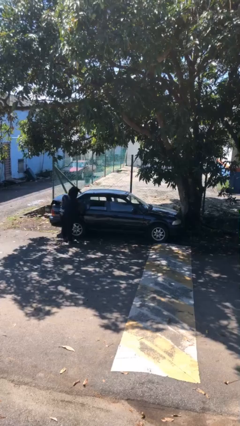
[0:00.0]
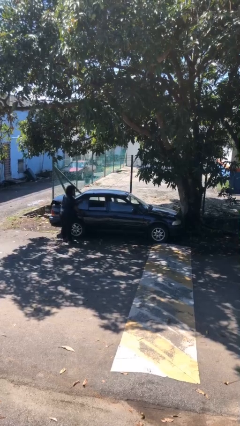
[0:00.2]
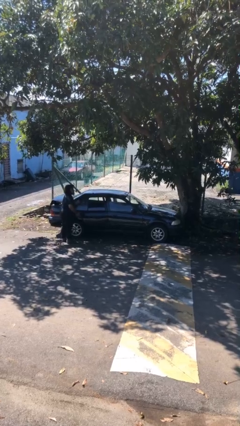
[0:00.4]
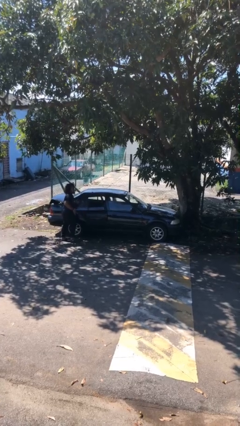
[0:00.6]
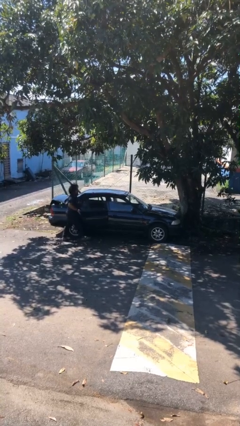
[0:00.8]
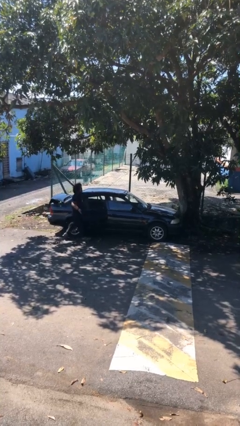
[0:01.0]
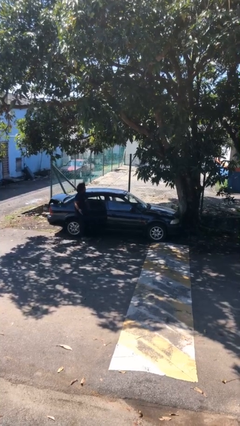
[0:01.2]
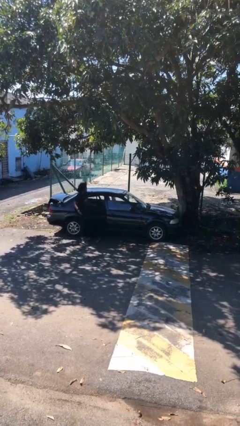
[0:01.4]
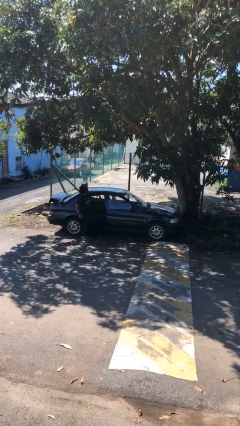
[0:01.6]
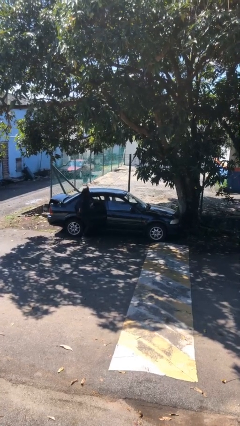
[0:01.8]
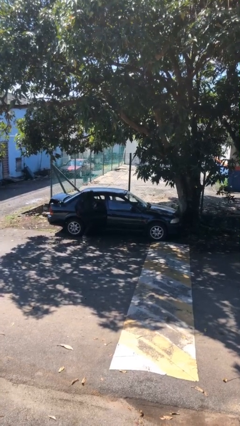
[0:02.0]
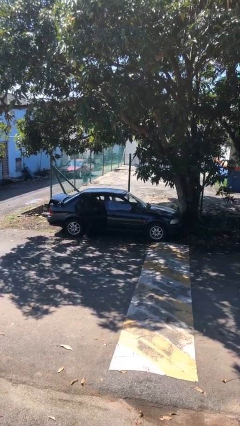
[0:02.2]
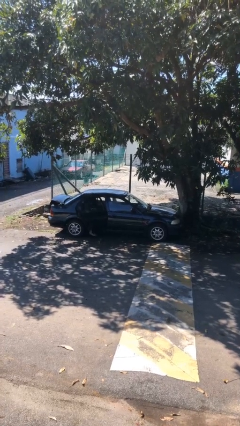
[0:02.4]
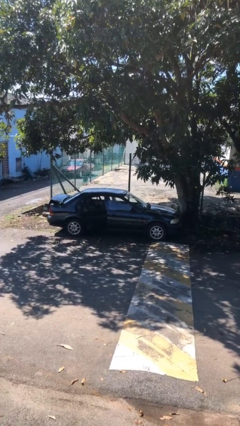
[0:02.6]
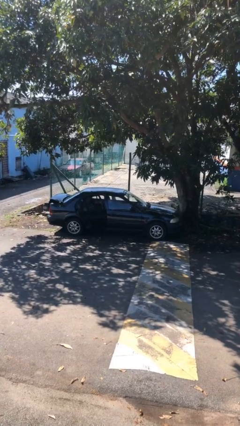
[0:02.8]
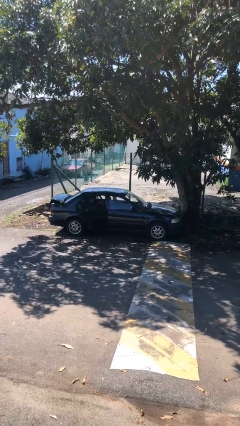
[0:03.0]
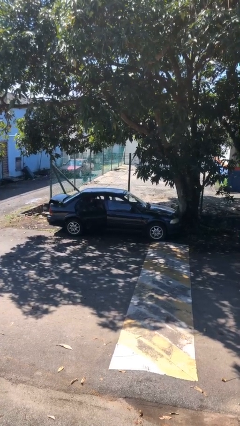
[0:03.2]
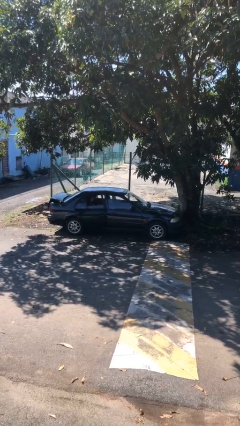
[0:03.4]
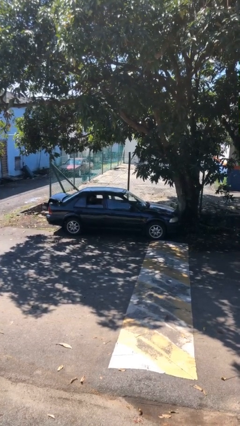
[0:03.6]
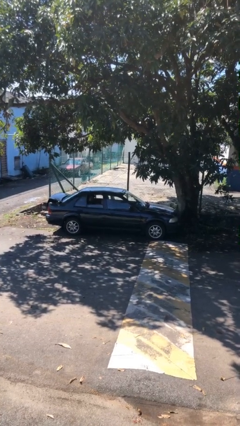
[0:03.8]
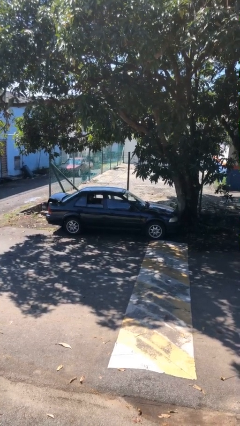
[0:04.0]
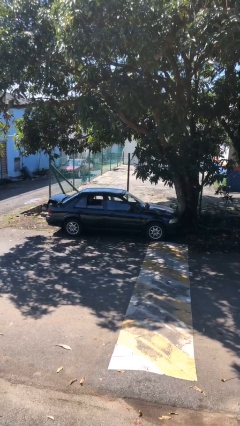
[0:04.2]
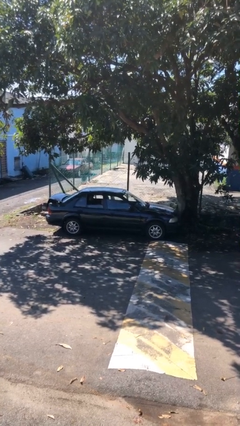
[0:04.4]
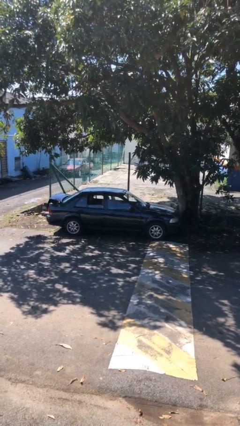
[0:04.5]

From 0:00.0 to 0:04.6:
car picks up person

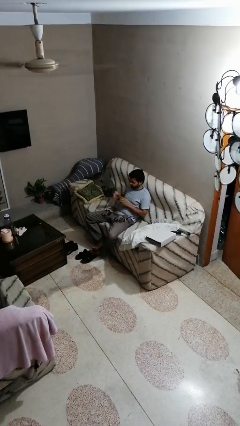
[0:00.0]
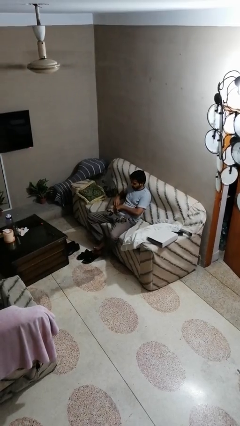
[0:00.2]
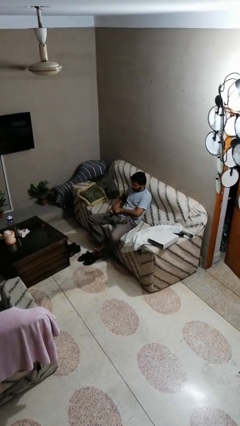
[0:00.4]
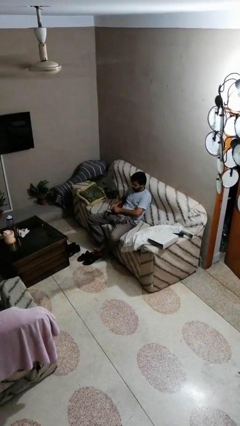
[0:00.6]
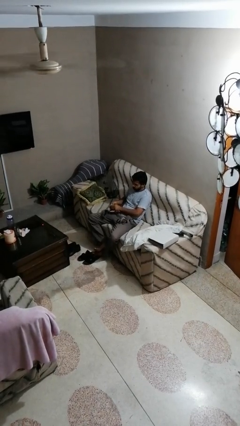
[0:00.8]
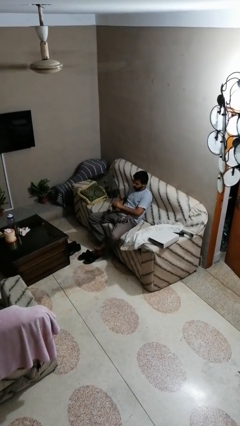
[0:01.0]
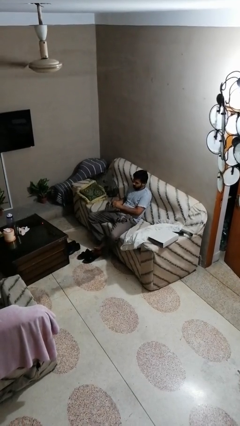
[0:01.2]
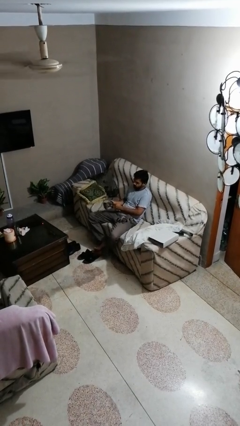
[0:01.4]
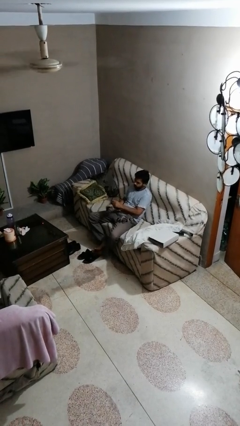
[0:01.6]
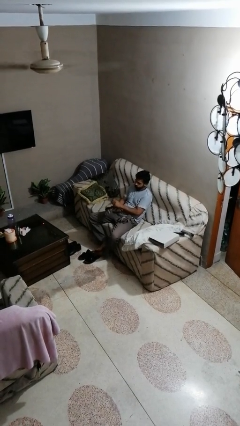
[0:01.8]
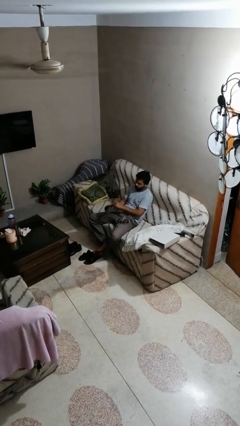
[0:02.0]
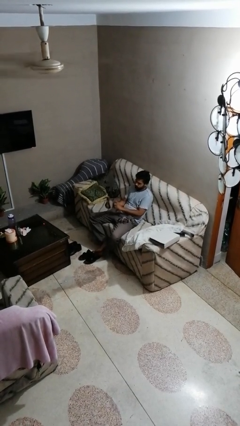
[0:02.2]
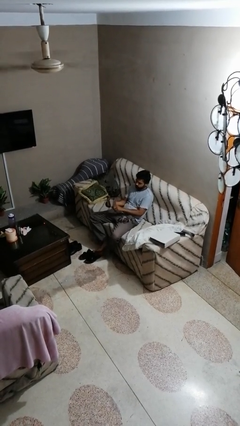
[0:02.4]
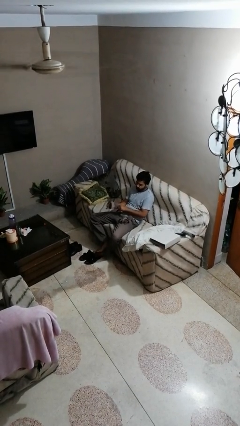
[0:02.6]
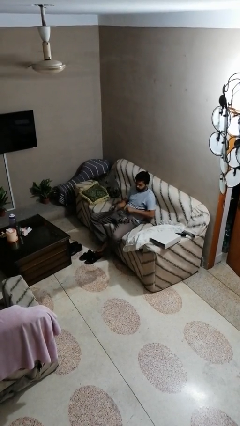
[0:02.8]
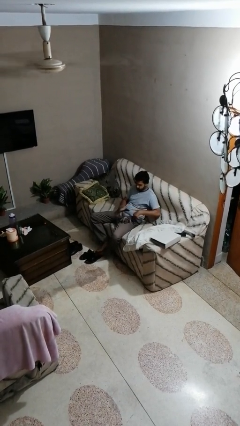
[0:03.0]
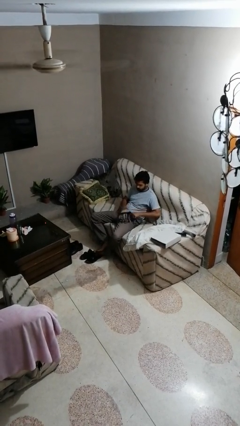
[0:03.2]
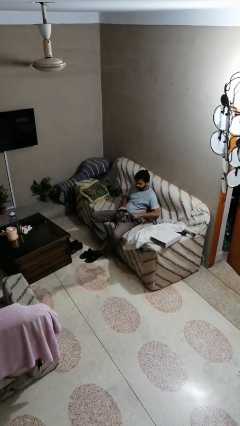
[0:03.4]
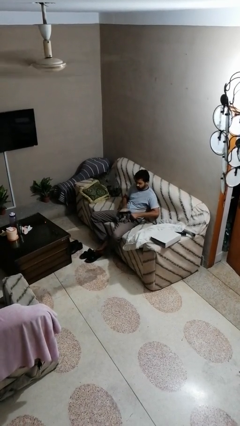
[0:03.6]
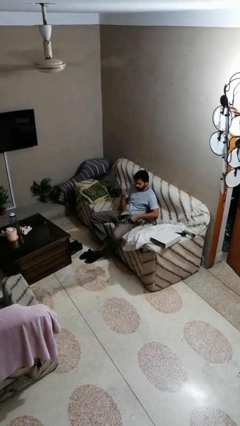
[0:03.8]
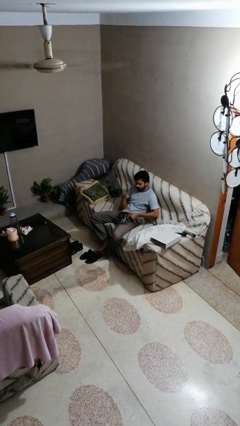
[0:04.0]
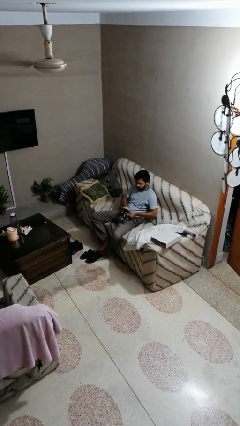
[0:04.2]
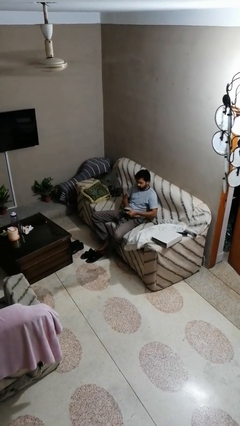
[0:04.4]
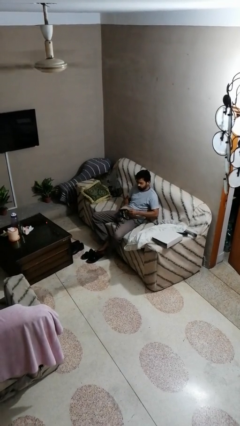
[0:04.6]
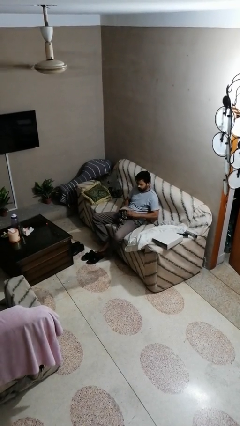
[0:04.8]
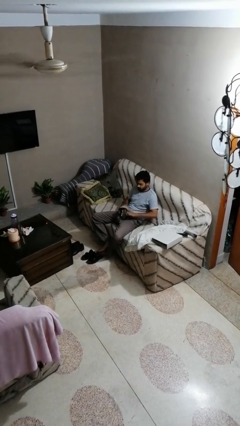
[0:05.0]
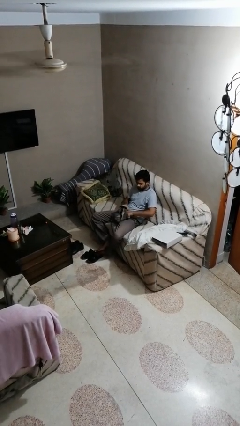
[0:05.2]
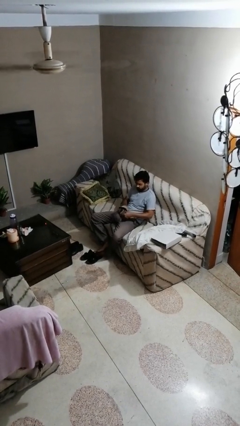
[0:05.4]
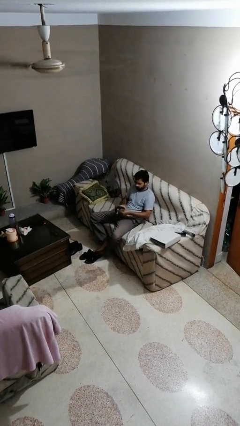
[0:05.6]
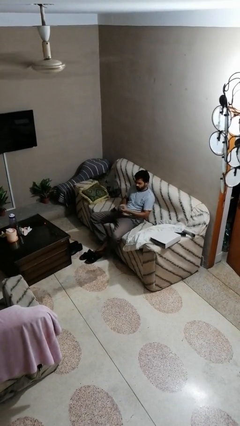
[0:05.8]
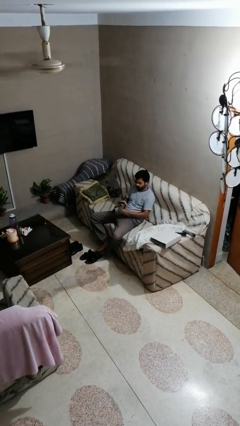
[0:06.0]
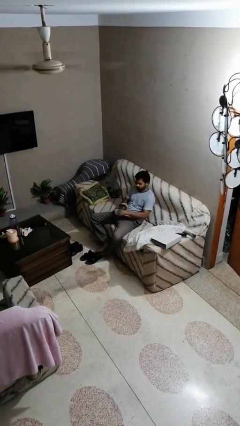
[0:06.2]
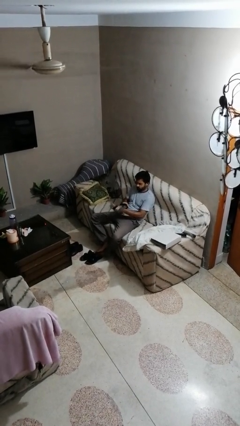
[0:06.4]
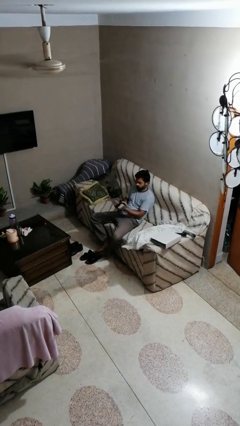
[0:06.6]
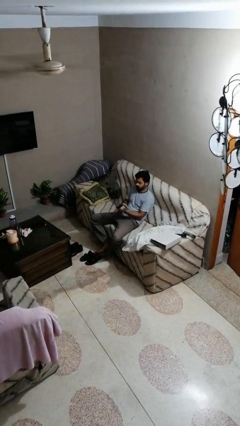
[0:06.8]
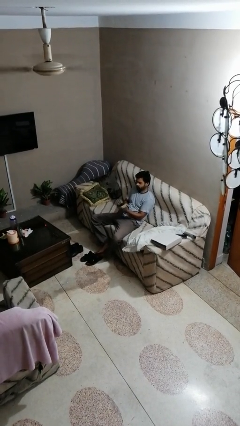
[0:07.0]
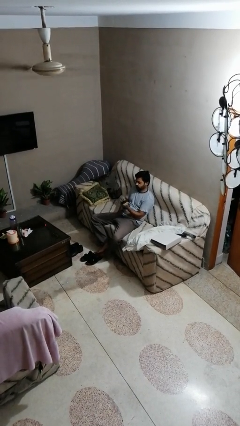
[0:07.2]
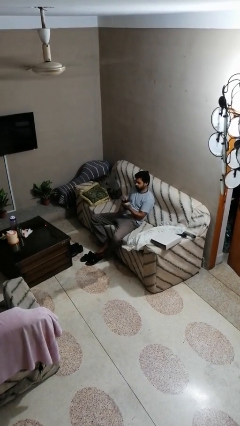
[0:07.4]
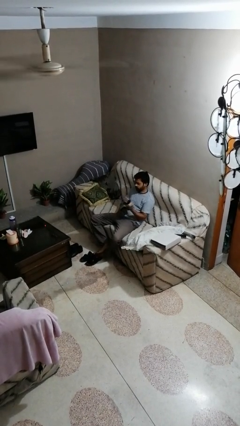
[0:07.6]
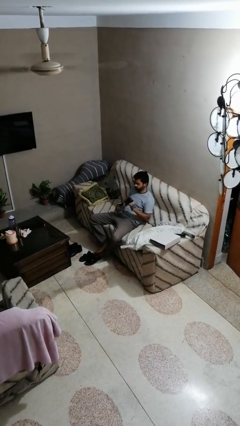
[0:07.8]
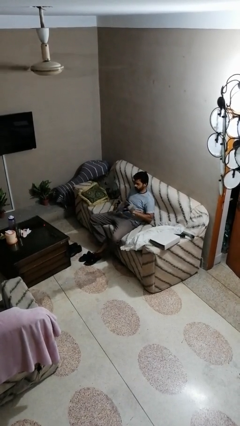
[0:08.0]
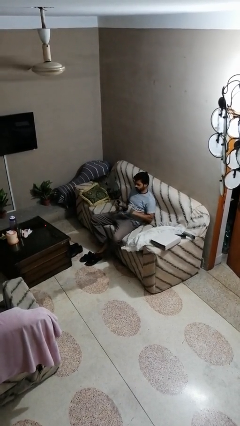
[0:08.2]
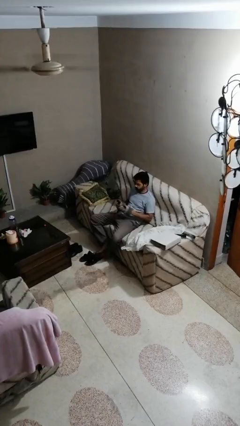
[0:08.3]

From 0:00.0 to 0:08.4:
person puts on gloves

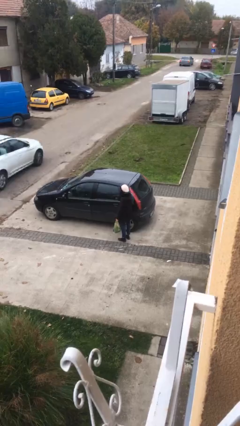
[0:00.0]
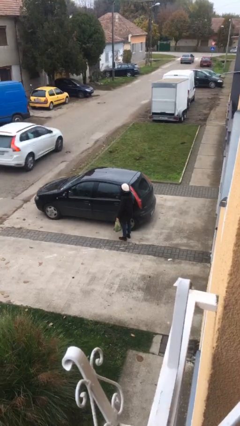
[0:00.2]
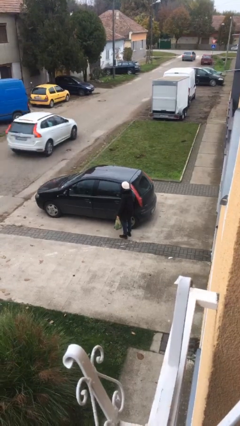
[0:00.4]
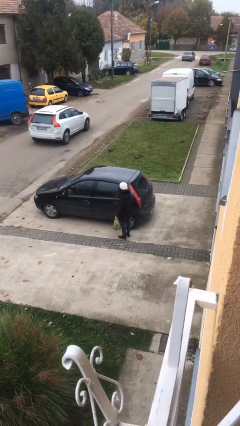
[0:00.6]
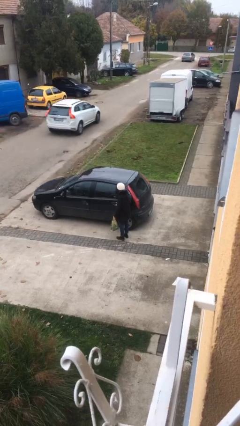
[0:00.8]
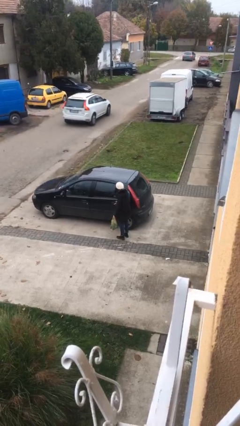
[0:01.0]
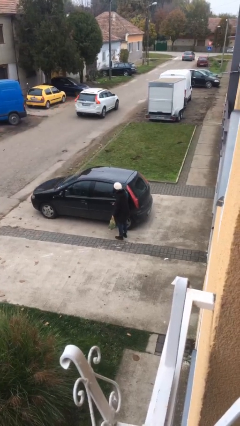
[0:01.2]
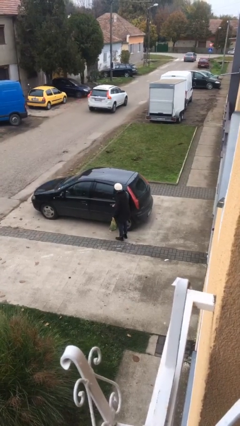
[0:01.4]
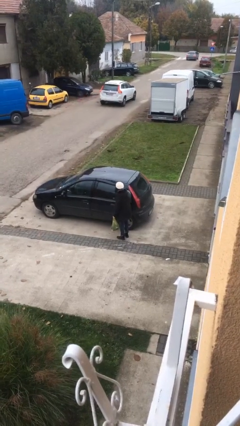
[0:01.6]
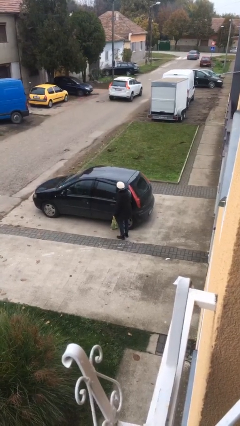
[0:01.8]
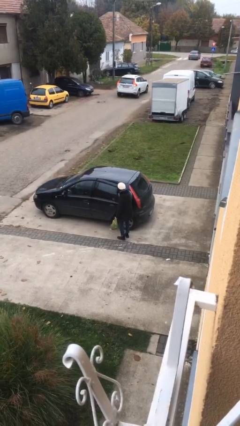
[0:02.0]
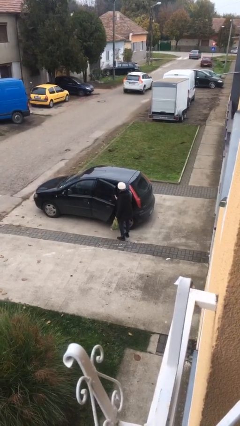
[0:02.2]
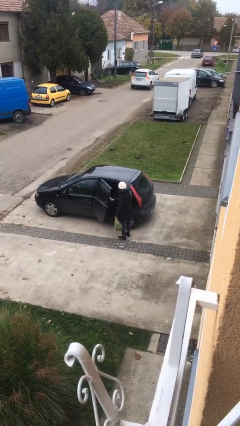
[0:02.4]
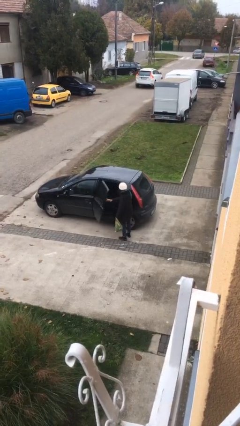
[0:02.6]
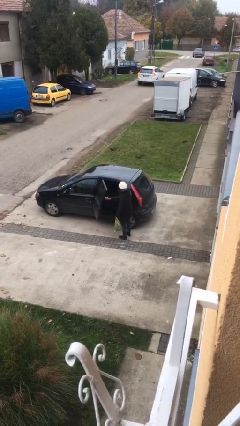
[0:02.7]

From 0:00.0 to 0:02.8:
person opens car door

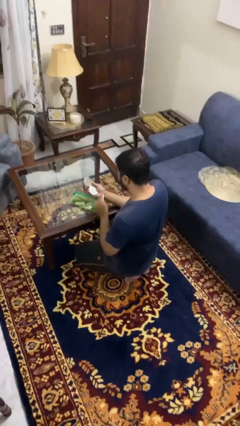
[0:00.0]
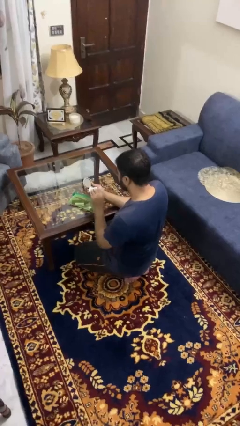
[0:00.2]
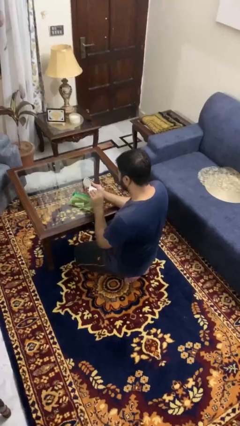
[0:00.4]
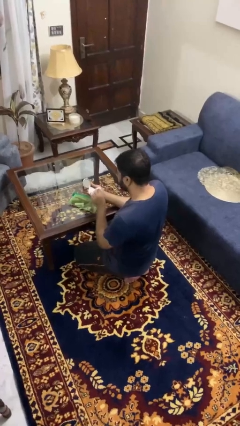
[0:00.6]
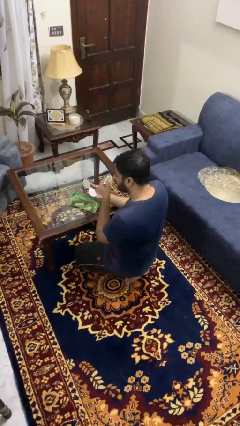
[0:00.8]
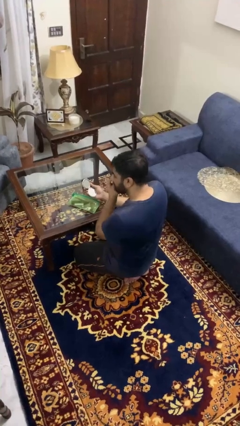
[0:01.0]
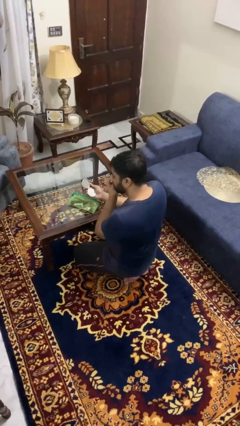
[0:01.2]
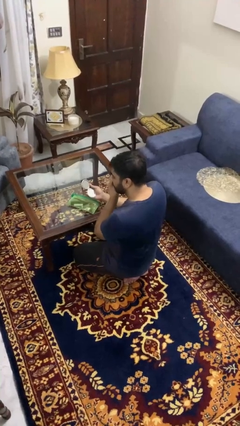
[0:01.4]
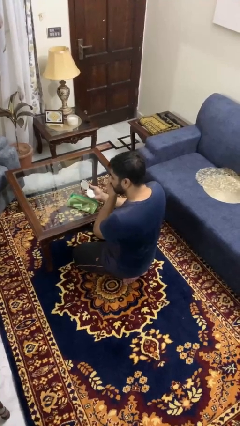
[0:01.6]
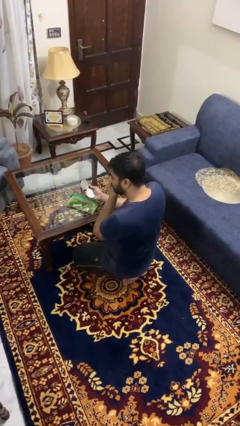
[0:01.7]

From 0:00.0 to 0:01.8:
person applies foundation makeup
